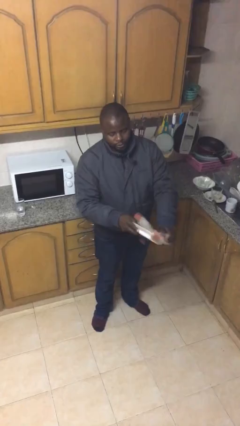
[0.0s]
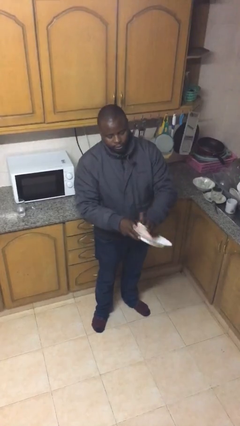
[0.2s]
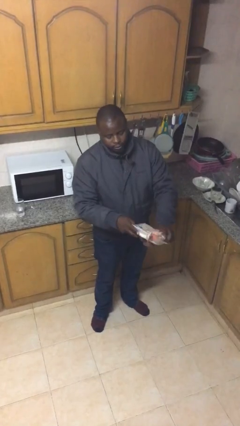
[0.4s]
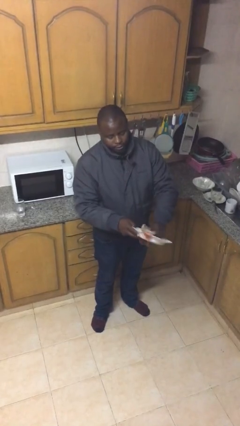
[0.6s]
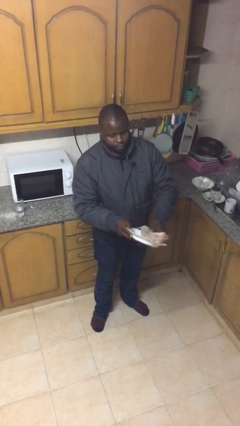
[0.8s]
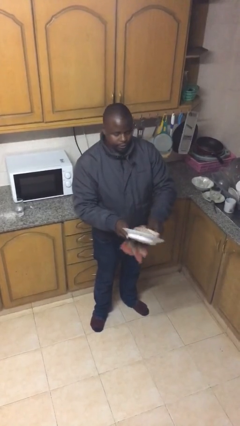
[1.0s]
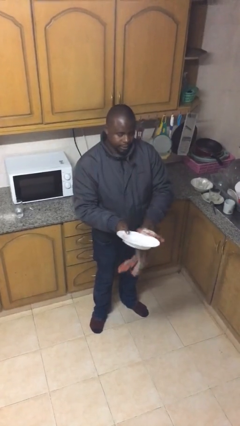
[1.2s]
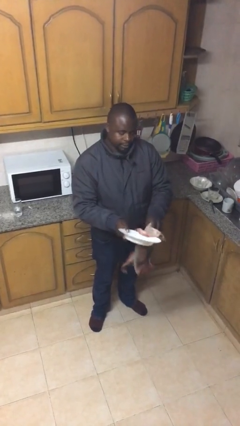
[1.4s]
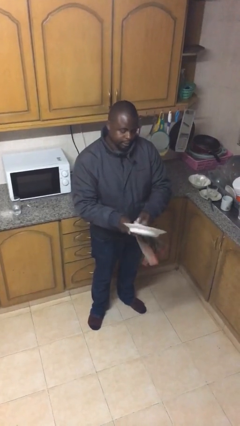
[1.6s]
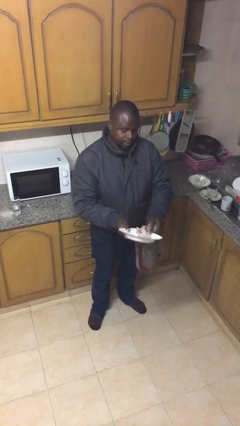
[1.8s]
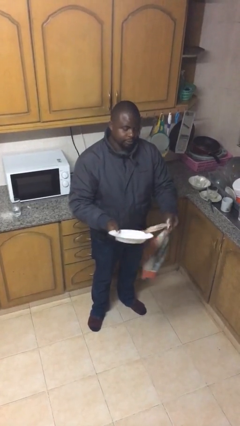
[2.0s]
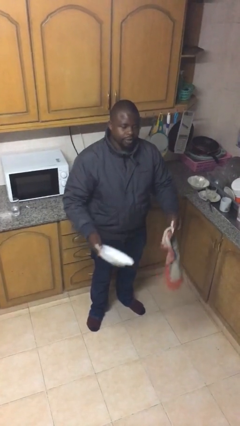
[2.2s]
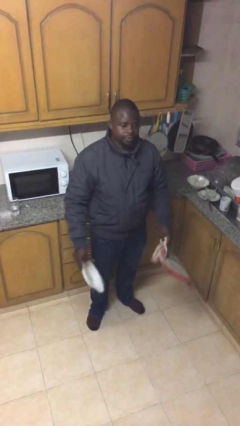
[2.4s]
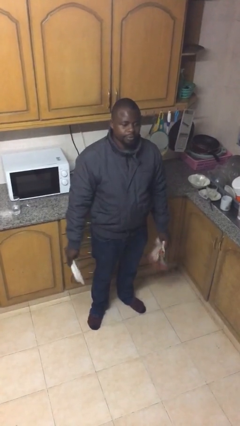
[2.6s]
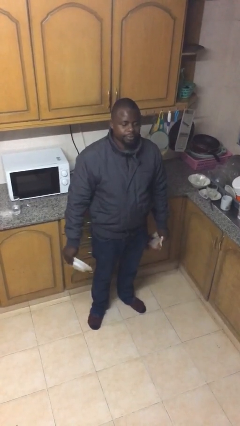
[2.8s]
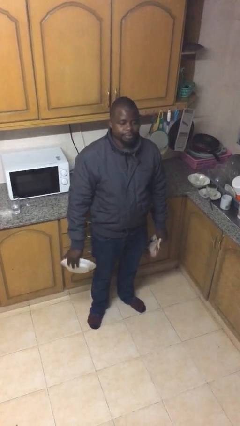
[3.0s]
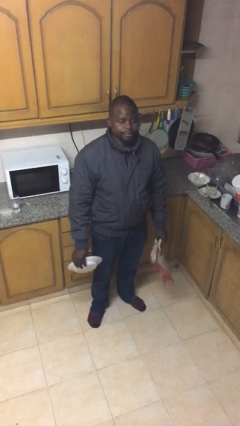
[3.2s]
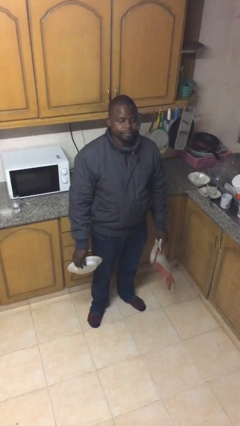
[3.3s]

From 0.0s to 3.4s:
person dries dish

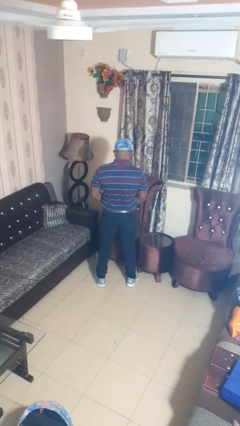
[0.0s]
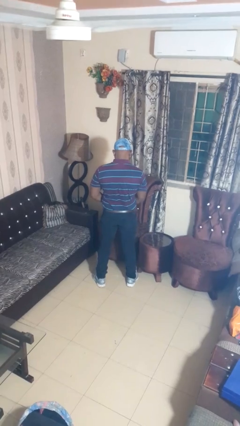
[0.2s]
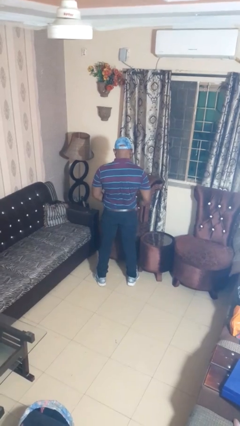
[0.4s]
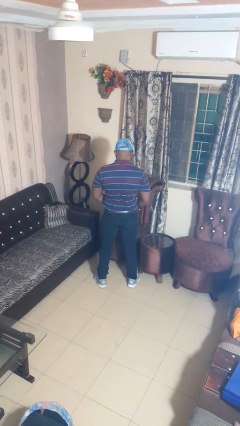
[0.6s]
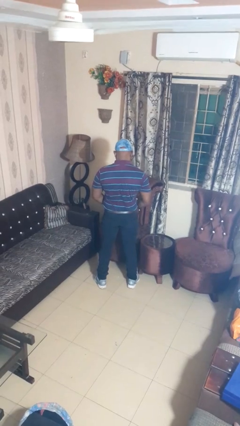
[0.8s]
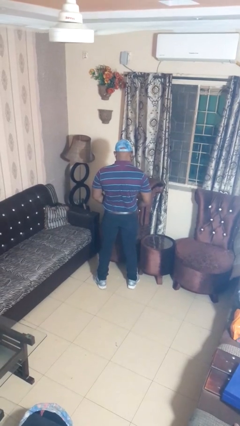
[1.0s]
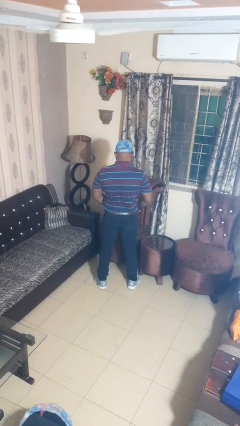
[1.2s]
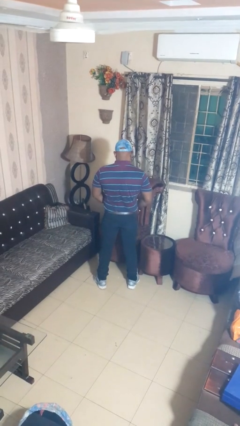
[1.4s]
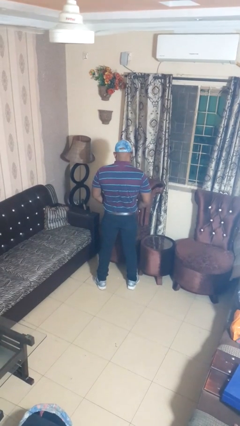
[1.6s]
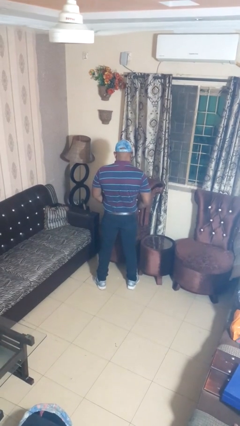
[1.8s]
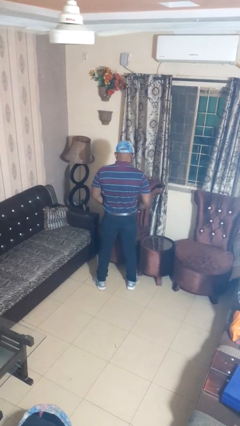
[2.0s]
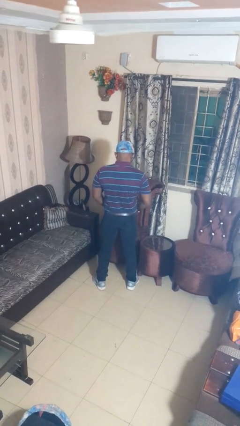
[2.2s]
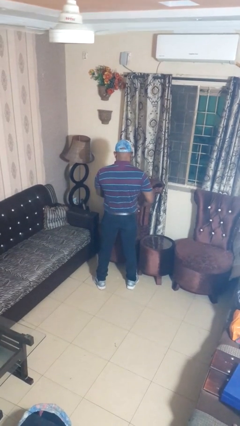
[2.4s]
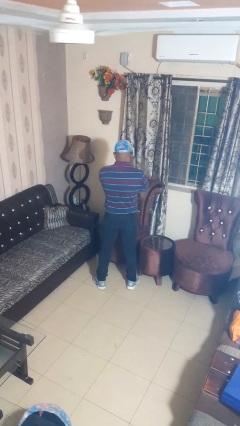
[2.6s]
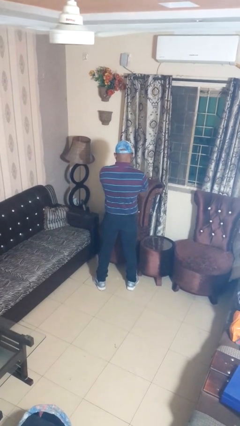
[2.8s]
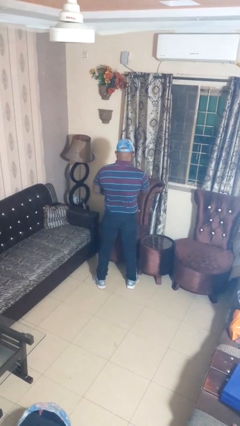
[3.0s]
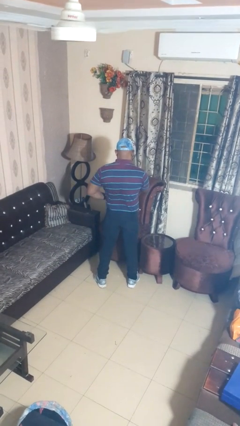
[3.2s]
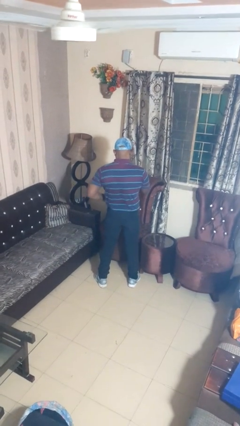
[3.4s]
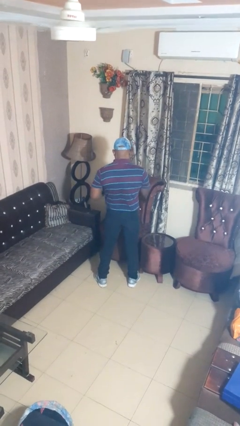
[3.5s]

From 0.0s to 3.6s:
person takes off belt

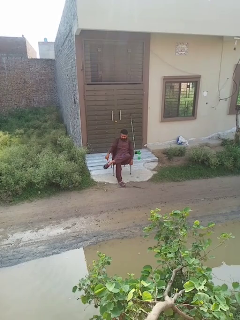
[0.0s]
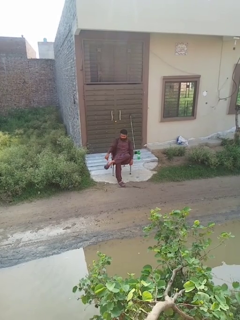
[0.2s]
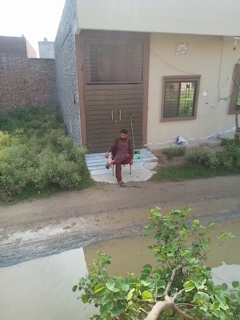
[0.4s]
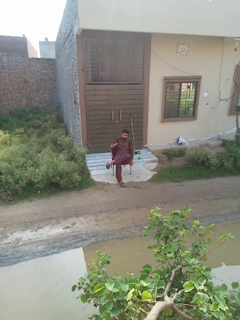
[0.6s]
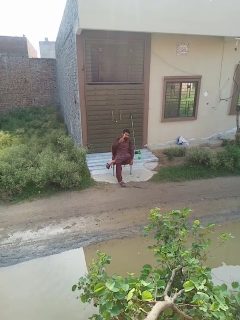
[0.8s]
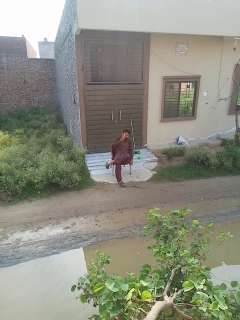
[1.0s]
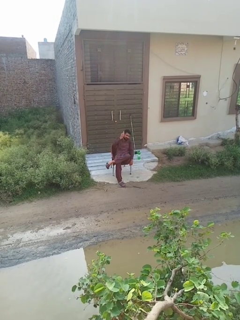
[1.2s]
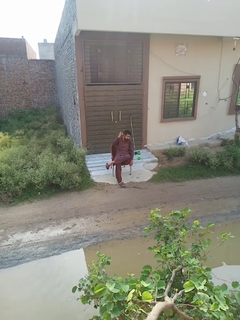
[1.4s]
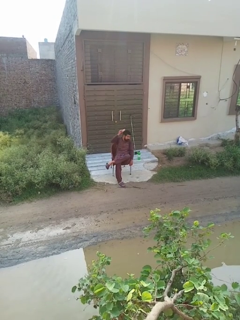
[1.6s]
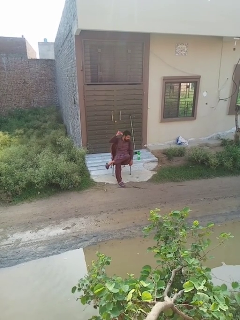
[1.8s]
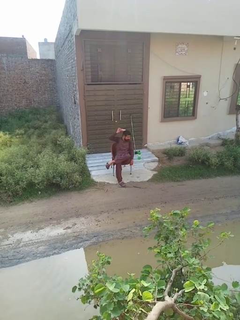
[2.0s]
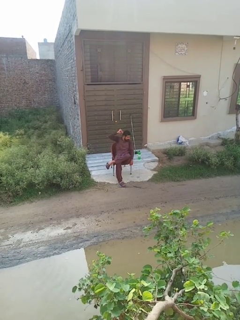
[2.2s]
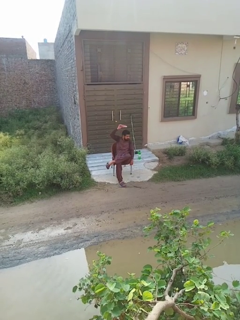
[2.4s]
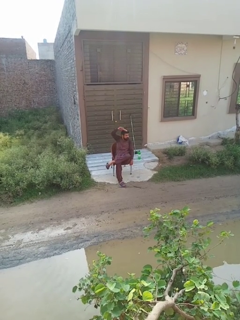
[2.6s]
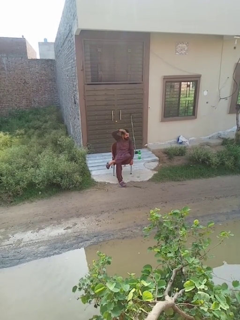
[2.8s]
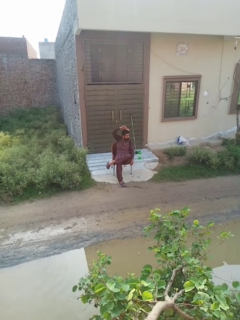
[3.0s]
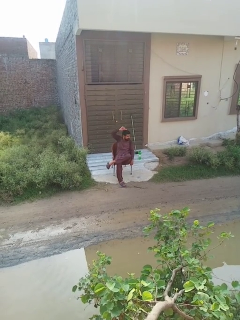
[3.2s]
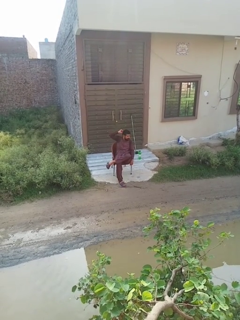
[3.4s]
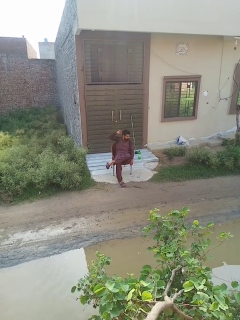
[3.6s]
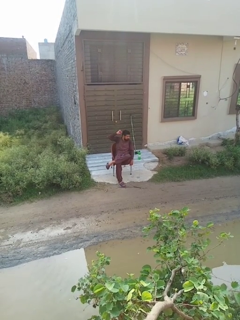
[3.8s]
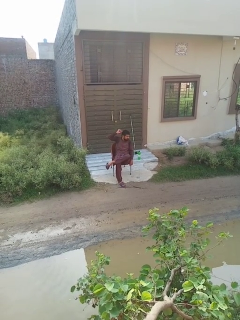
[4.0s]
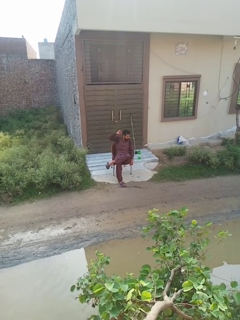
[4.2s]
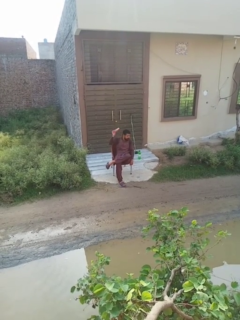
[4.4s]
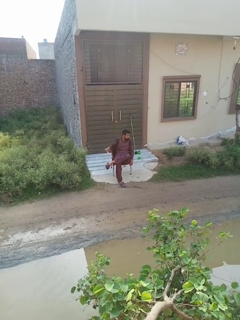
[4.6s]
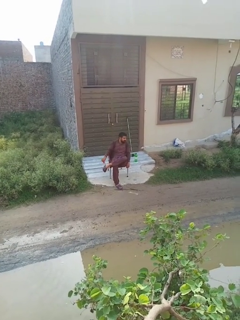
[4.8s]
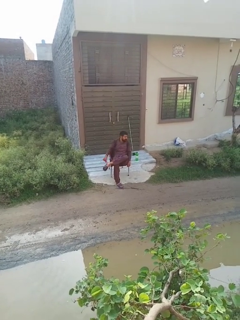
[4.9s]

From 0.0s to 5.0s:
person brushes hair

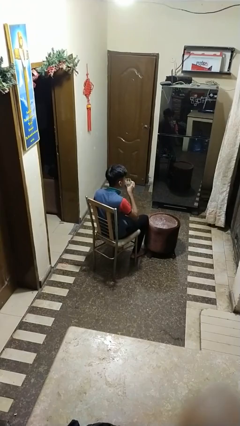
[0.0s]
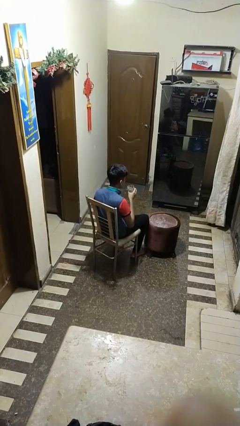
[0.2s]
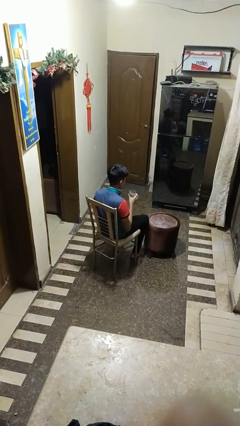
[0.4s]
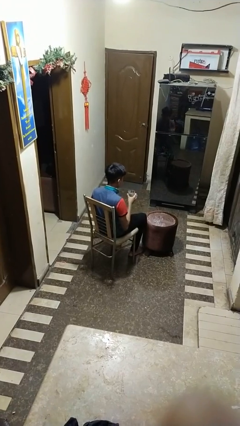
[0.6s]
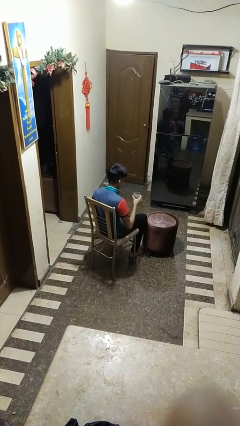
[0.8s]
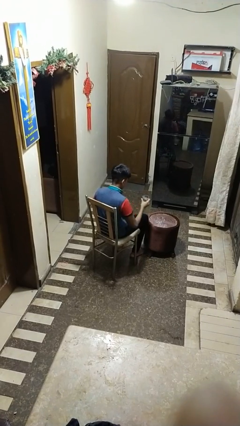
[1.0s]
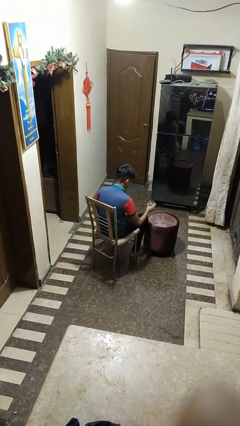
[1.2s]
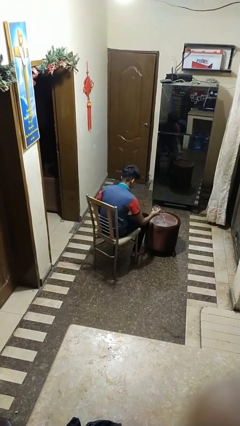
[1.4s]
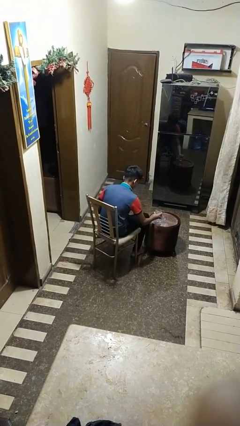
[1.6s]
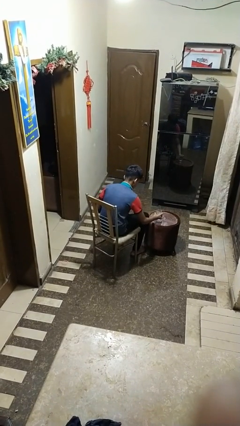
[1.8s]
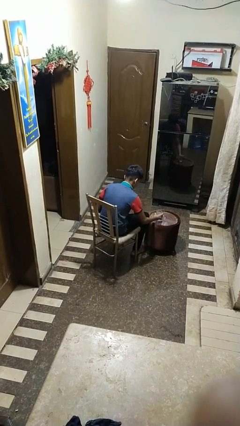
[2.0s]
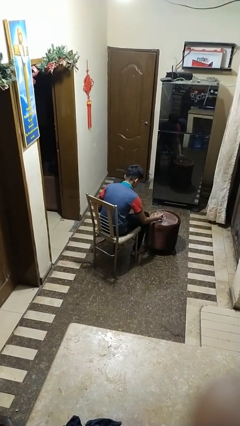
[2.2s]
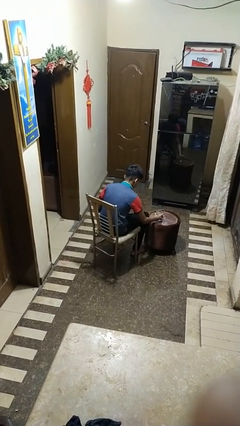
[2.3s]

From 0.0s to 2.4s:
person puts down object on table

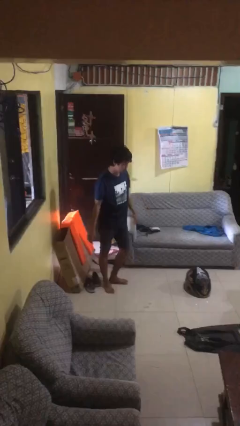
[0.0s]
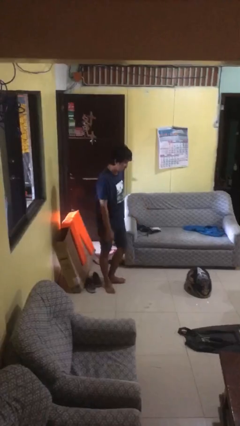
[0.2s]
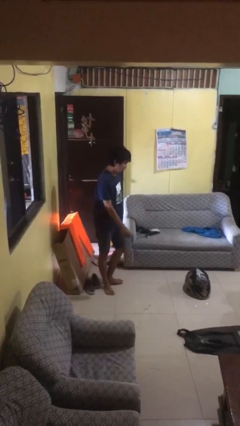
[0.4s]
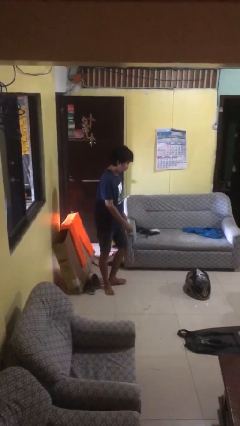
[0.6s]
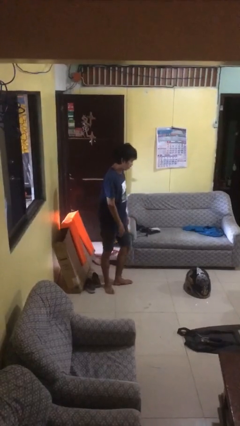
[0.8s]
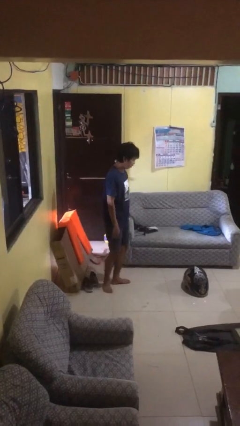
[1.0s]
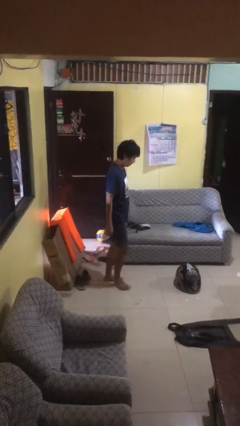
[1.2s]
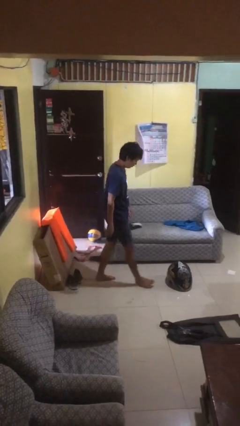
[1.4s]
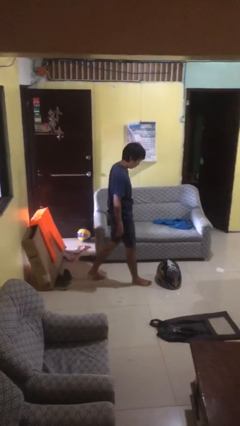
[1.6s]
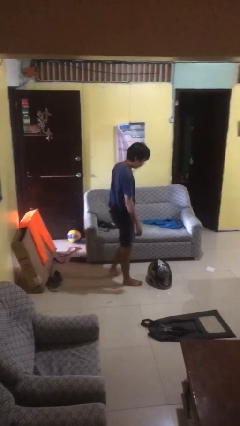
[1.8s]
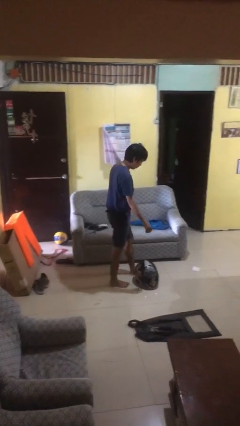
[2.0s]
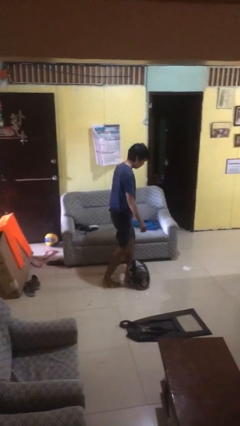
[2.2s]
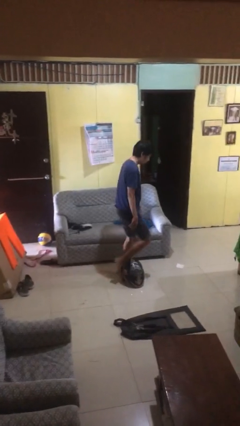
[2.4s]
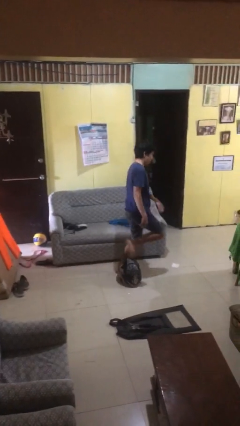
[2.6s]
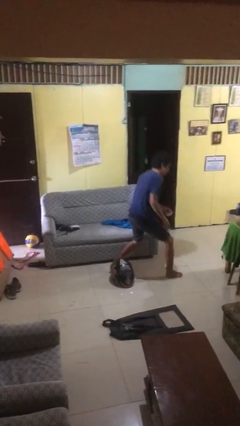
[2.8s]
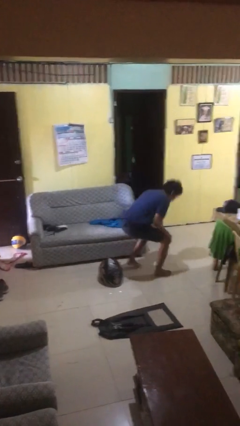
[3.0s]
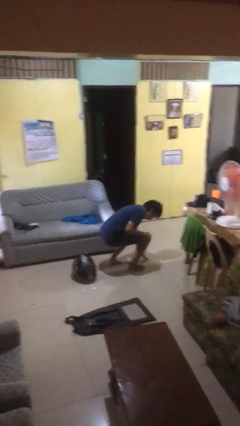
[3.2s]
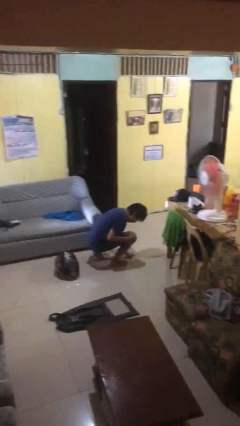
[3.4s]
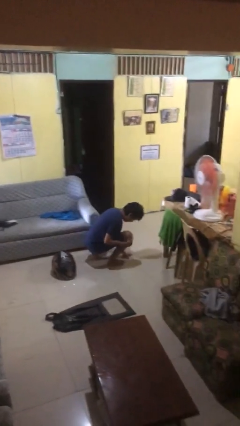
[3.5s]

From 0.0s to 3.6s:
person trips on object on floor

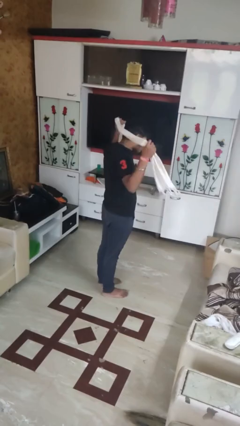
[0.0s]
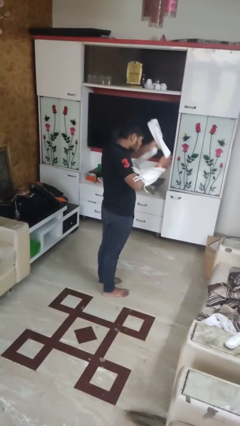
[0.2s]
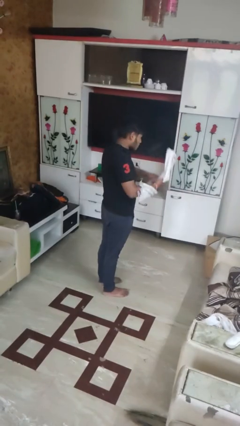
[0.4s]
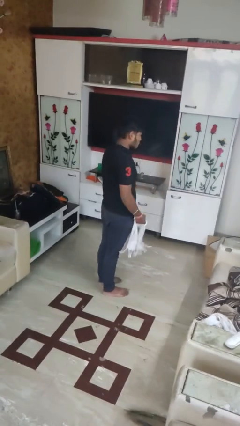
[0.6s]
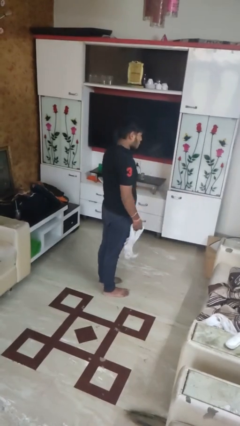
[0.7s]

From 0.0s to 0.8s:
person takes off scarf

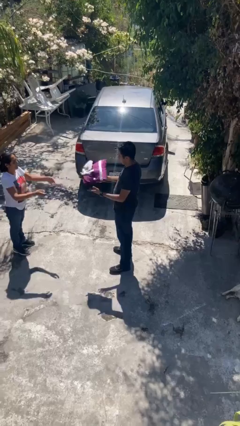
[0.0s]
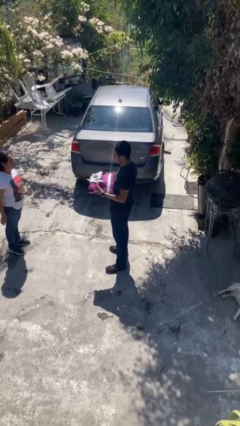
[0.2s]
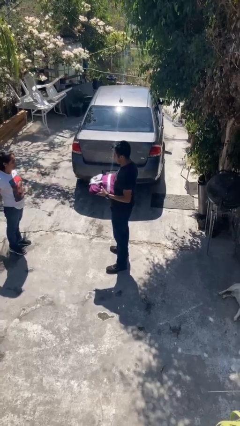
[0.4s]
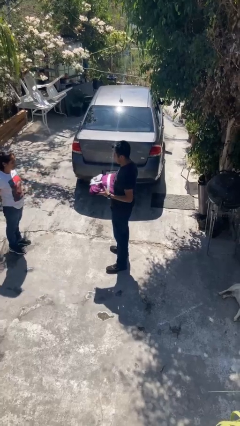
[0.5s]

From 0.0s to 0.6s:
person catches object from person
